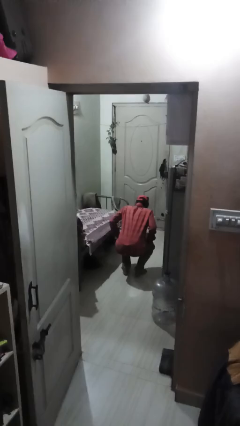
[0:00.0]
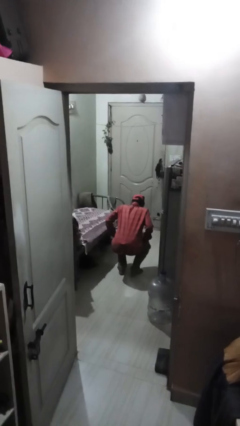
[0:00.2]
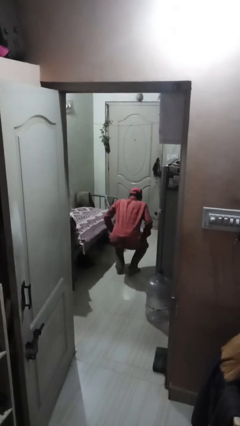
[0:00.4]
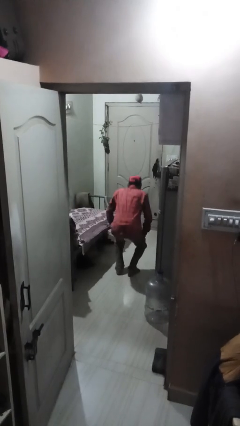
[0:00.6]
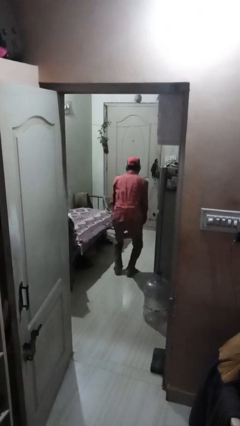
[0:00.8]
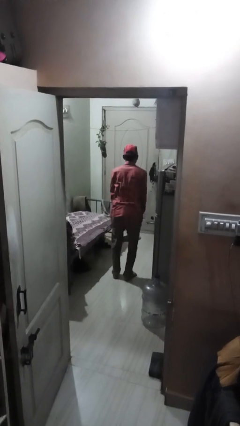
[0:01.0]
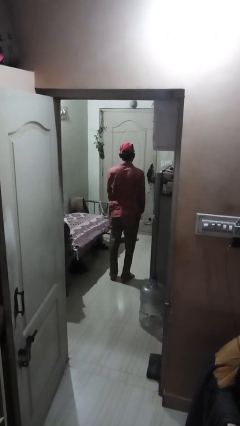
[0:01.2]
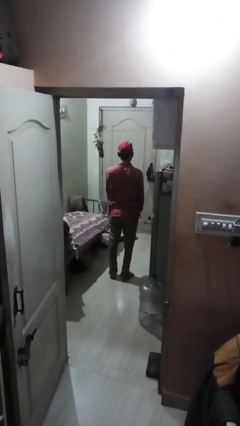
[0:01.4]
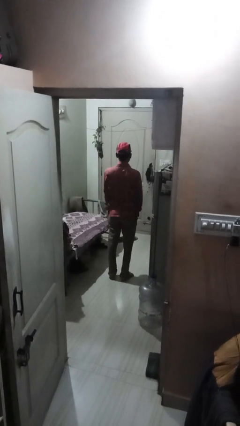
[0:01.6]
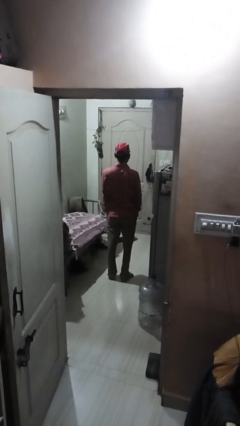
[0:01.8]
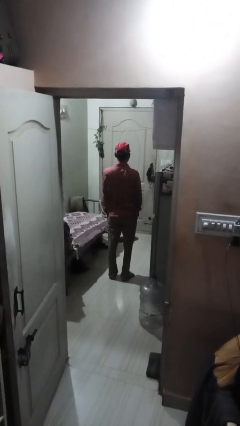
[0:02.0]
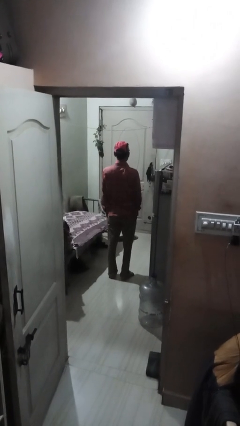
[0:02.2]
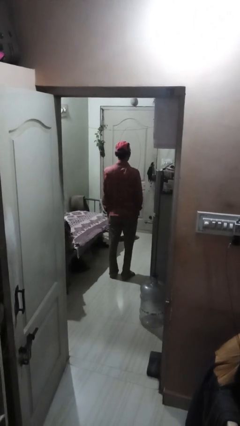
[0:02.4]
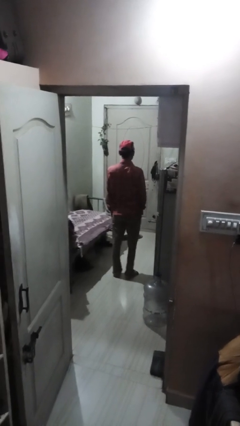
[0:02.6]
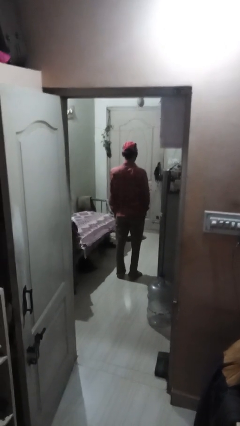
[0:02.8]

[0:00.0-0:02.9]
person stands up

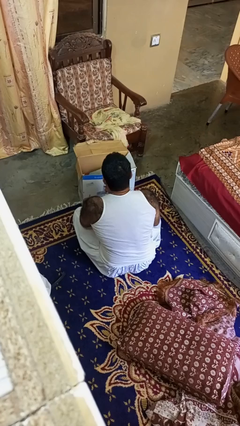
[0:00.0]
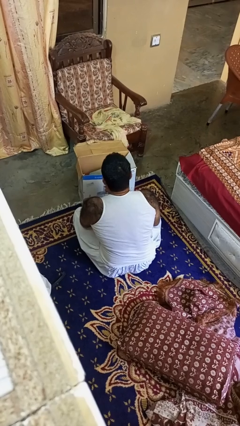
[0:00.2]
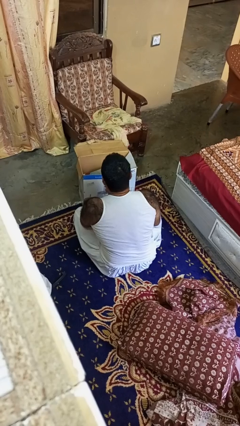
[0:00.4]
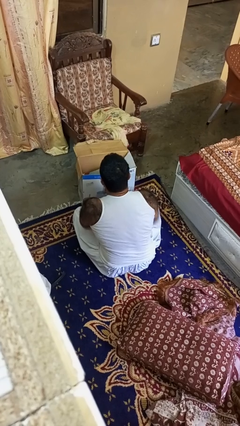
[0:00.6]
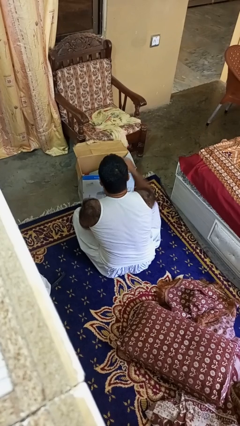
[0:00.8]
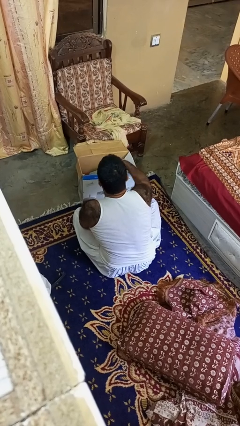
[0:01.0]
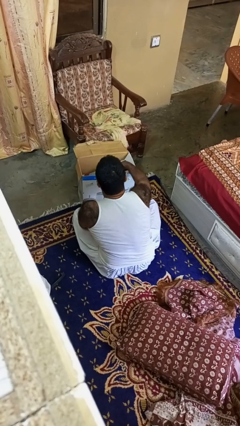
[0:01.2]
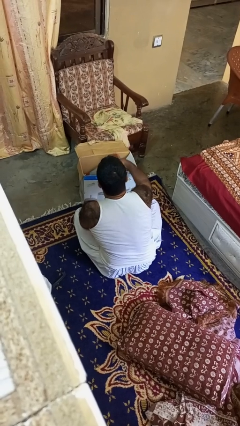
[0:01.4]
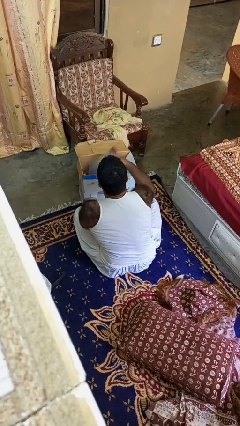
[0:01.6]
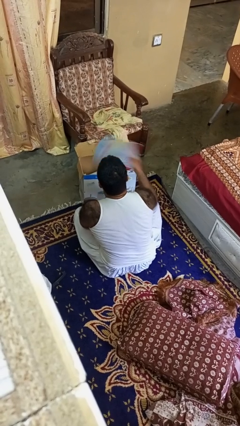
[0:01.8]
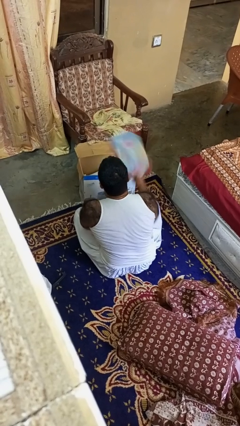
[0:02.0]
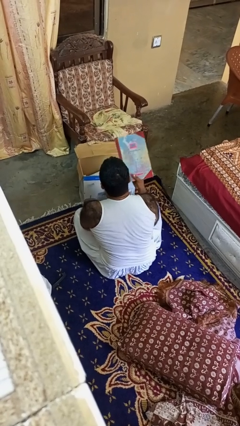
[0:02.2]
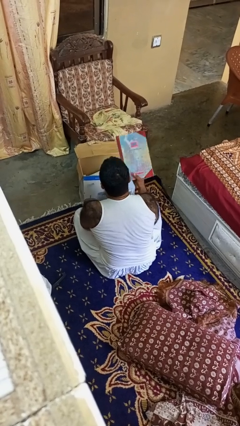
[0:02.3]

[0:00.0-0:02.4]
person takes object from box

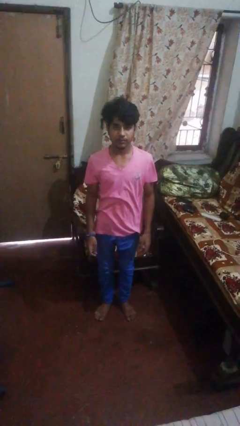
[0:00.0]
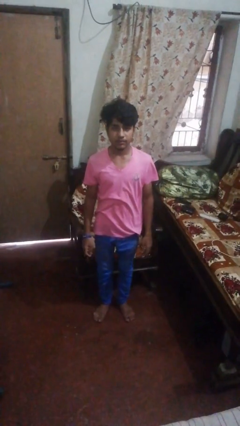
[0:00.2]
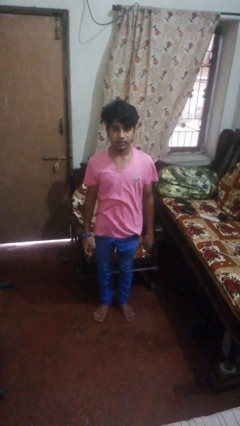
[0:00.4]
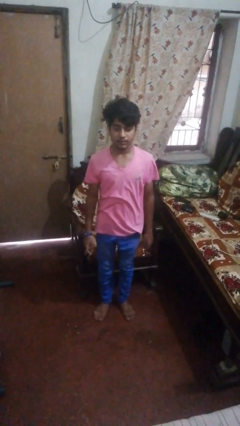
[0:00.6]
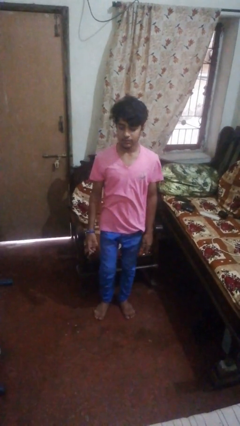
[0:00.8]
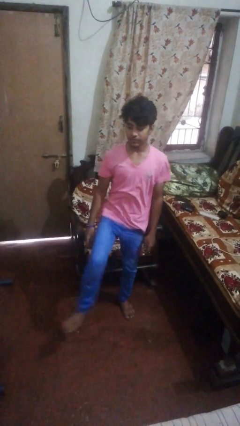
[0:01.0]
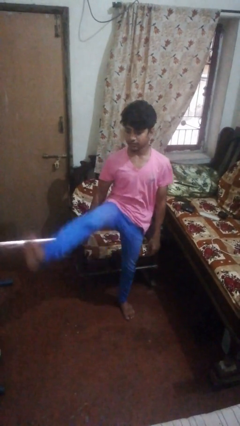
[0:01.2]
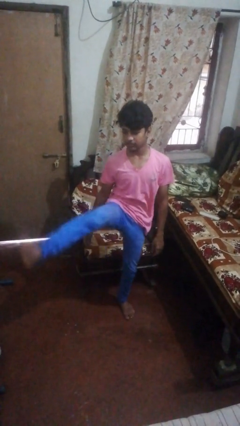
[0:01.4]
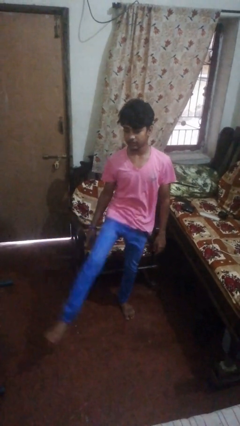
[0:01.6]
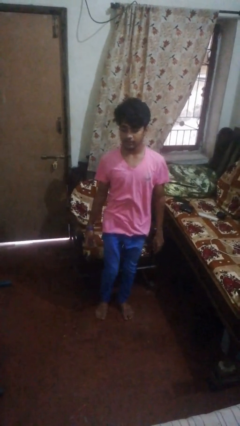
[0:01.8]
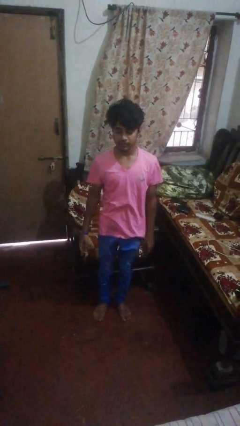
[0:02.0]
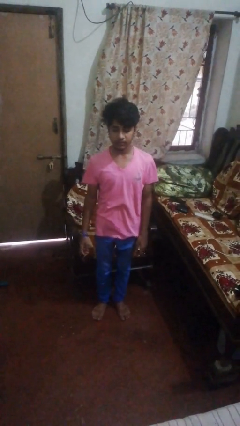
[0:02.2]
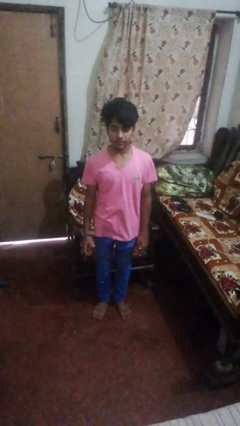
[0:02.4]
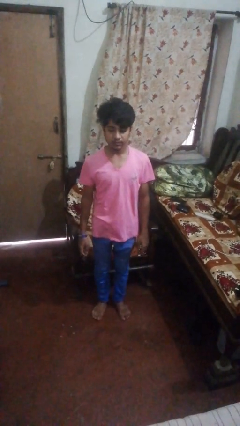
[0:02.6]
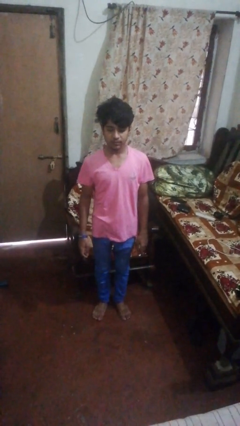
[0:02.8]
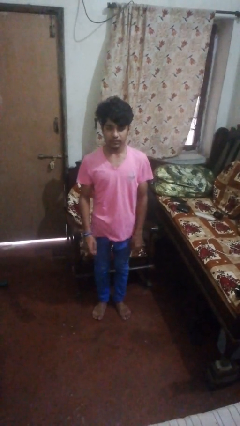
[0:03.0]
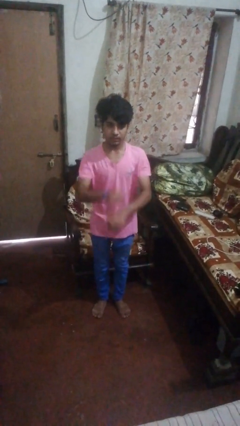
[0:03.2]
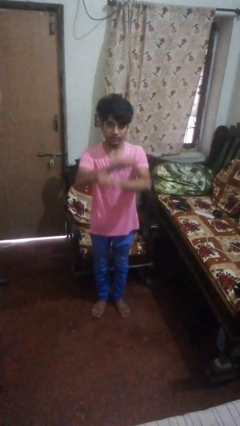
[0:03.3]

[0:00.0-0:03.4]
person karate kicks

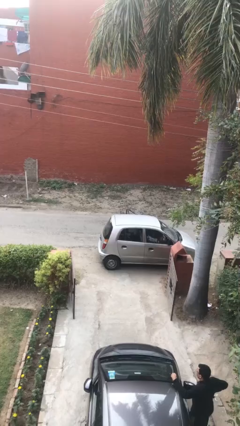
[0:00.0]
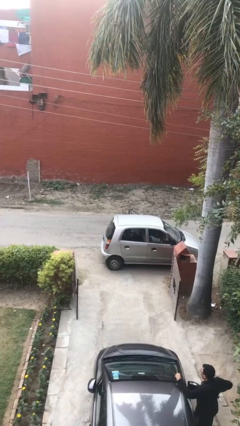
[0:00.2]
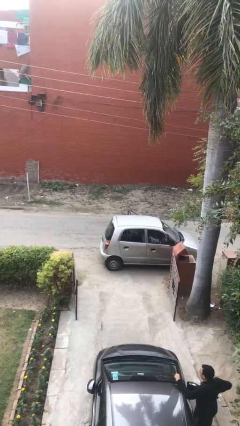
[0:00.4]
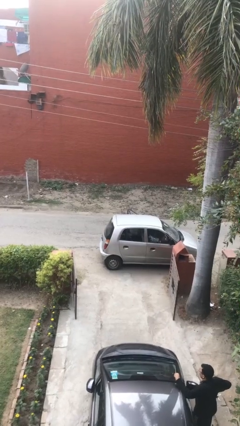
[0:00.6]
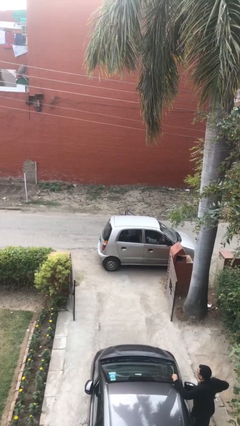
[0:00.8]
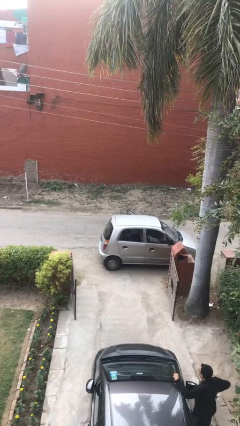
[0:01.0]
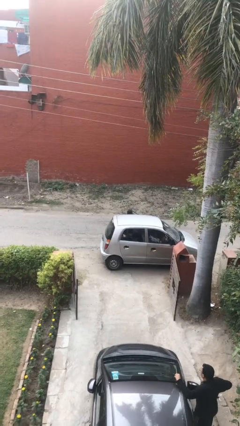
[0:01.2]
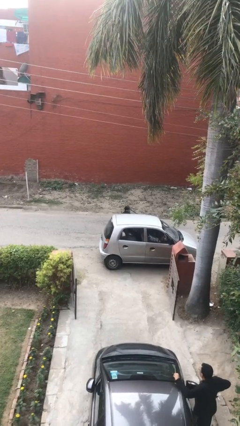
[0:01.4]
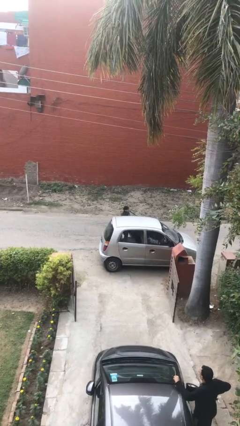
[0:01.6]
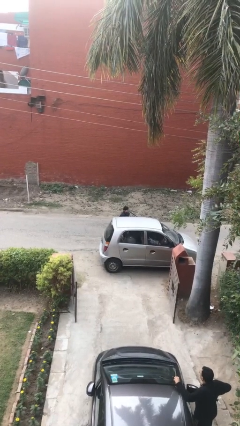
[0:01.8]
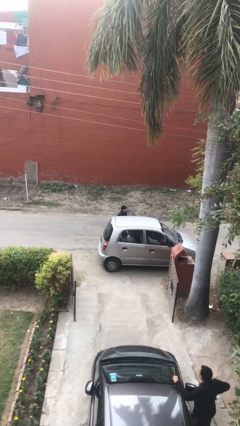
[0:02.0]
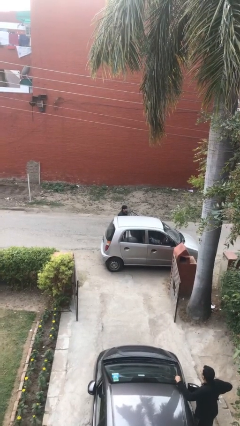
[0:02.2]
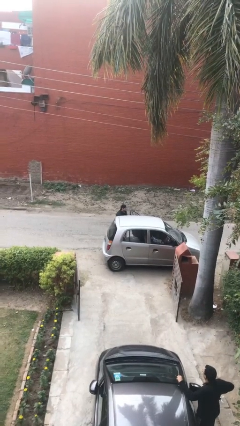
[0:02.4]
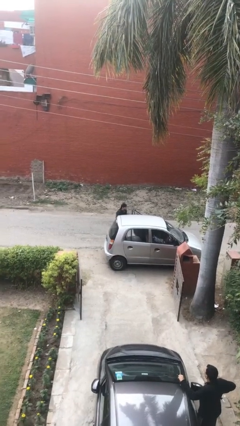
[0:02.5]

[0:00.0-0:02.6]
person exits car

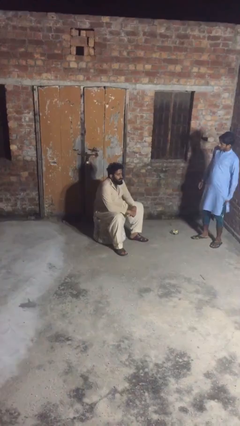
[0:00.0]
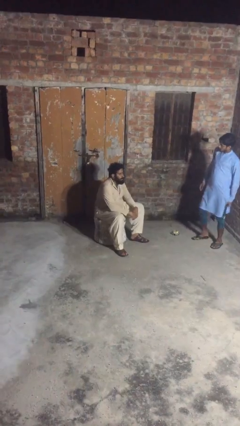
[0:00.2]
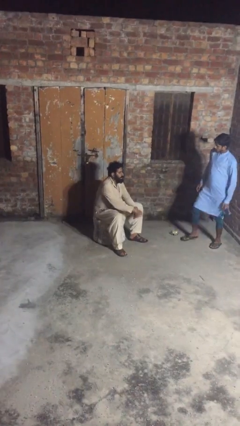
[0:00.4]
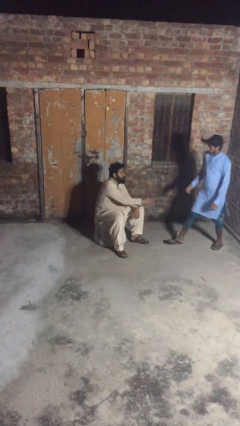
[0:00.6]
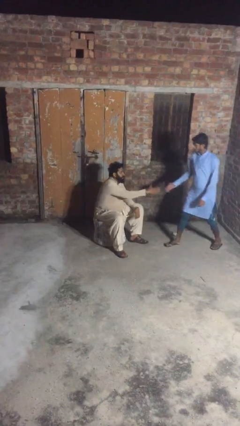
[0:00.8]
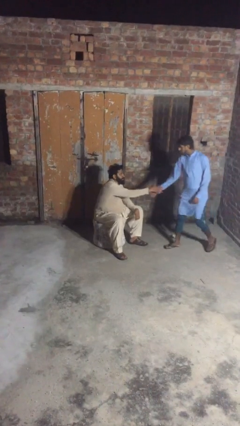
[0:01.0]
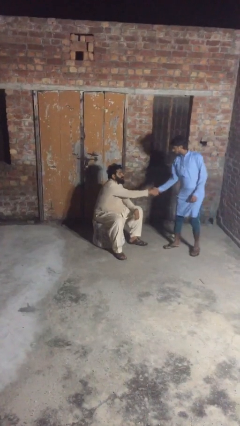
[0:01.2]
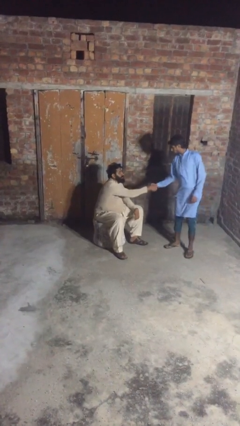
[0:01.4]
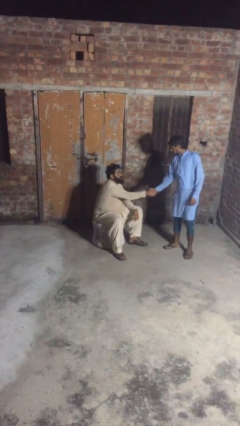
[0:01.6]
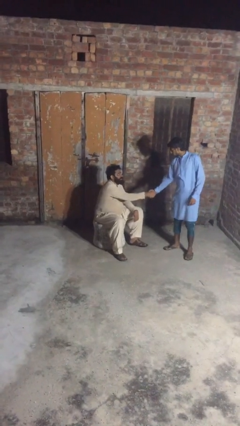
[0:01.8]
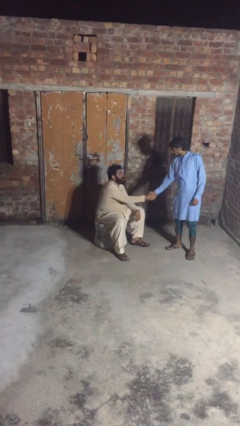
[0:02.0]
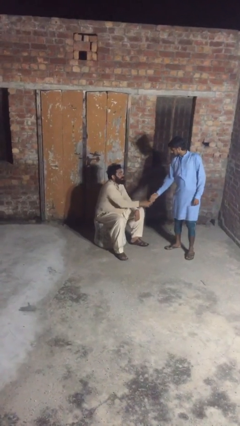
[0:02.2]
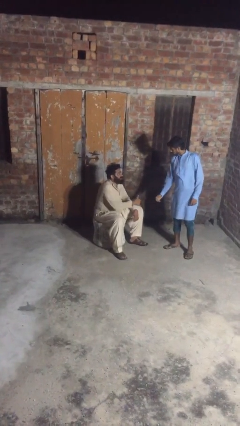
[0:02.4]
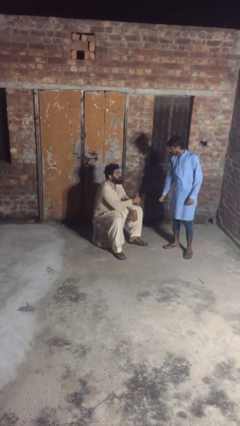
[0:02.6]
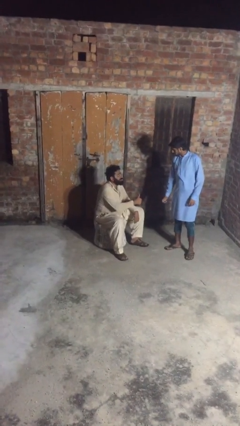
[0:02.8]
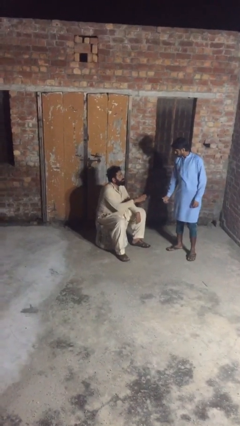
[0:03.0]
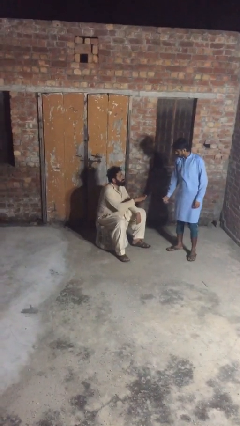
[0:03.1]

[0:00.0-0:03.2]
person shakes hand

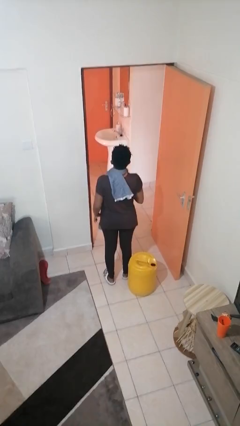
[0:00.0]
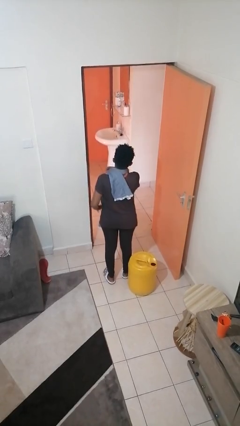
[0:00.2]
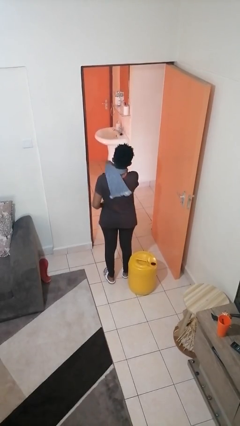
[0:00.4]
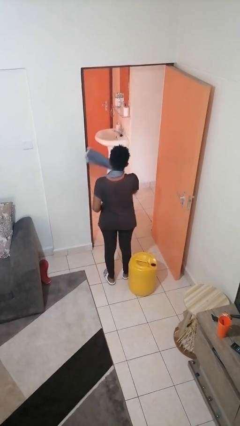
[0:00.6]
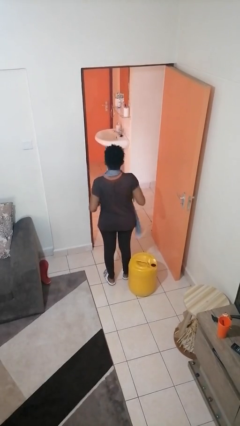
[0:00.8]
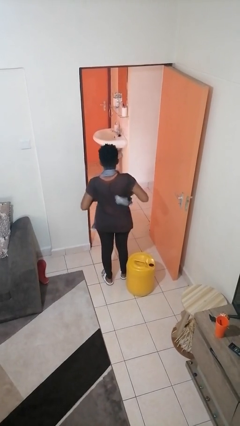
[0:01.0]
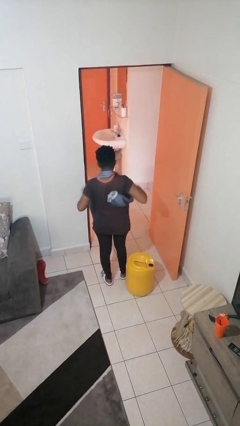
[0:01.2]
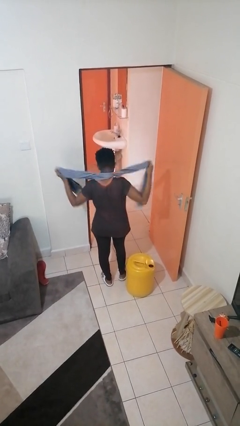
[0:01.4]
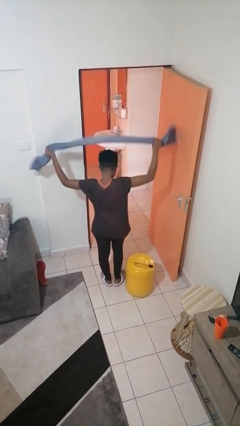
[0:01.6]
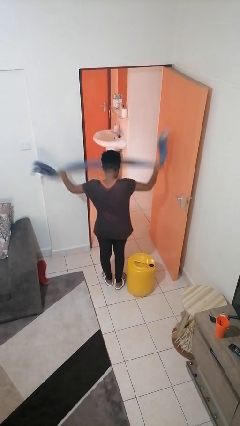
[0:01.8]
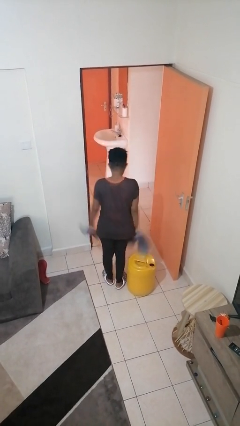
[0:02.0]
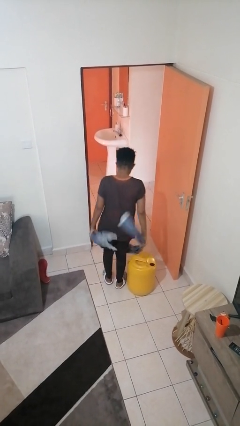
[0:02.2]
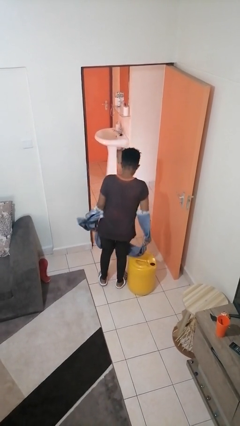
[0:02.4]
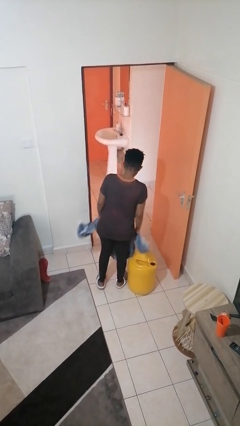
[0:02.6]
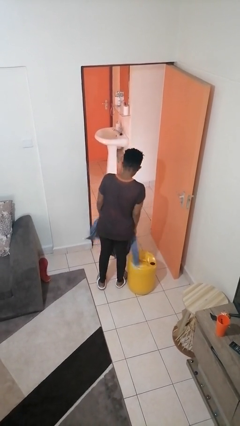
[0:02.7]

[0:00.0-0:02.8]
person takes off scarf
